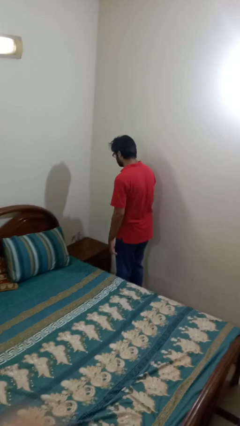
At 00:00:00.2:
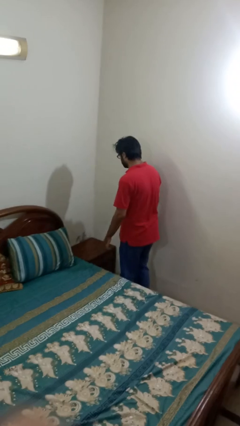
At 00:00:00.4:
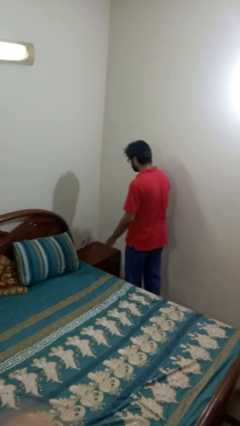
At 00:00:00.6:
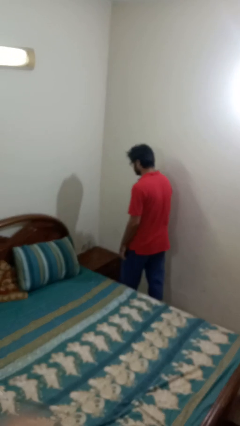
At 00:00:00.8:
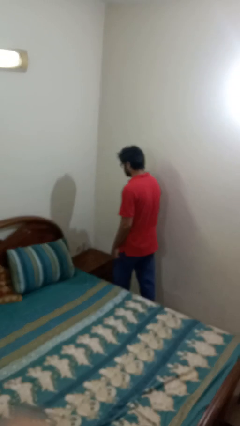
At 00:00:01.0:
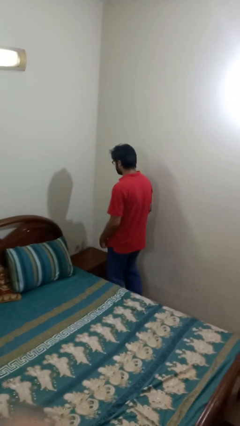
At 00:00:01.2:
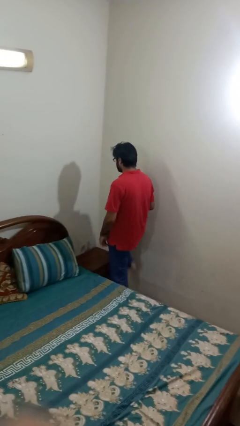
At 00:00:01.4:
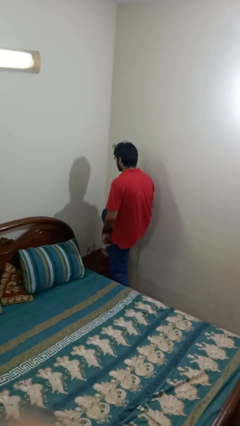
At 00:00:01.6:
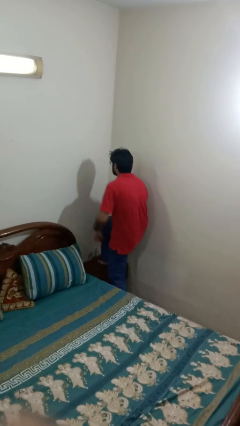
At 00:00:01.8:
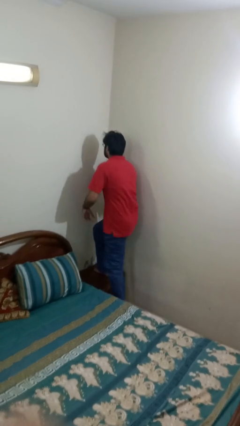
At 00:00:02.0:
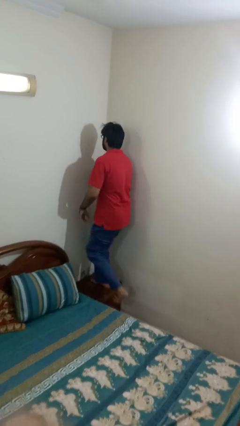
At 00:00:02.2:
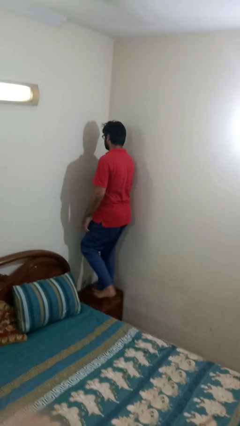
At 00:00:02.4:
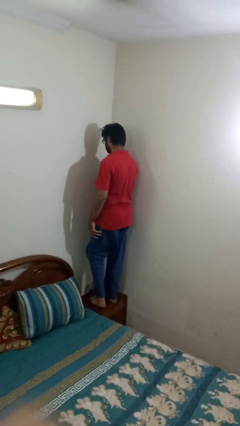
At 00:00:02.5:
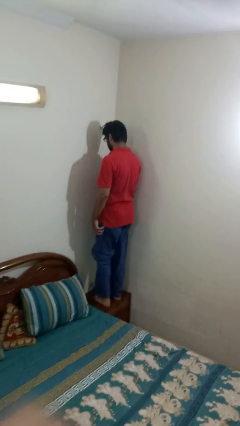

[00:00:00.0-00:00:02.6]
person climbs on table

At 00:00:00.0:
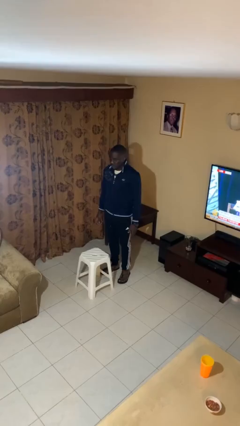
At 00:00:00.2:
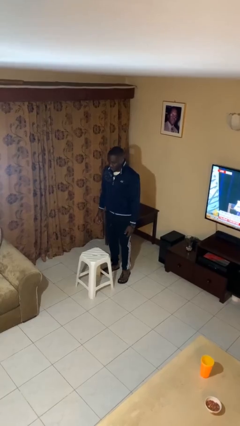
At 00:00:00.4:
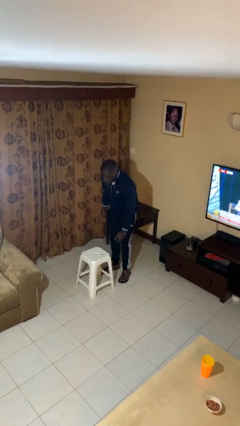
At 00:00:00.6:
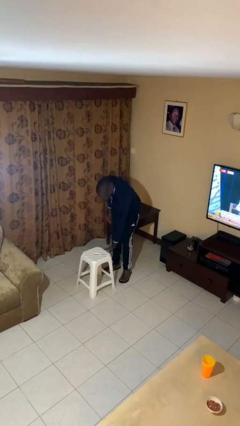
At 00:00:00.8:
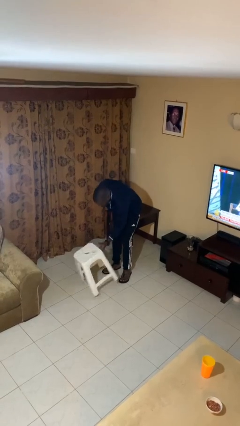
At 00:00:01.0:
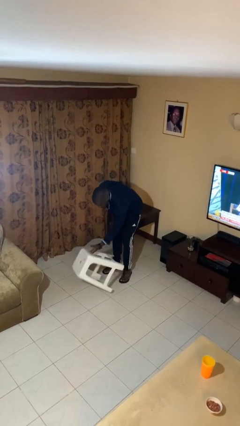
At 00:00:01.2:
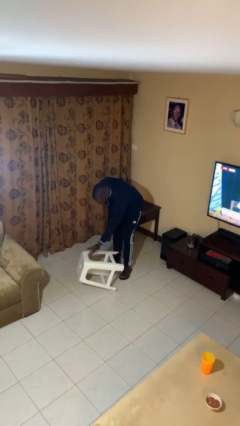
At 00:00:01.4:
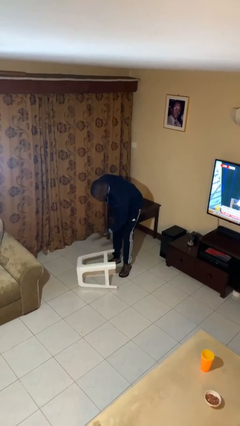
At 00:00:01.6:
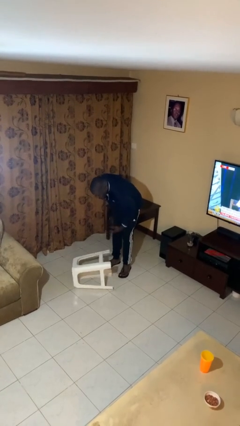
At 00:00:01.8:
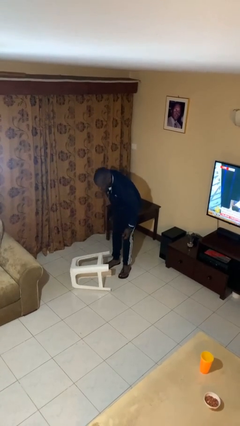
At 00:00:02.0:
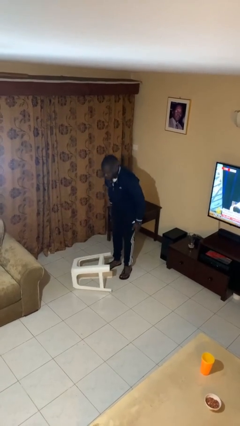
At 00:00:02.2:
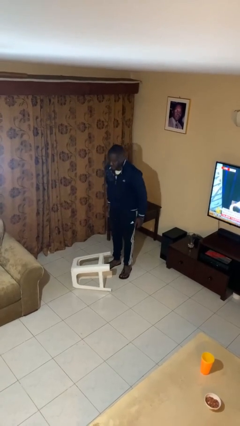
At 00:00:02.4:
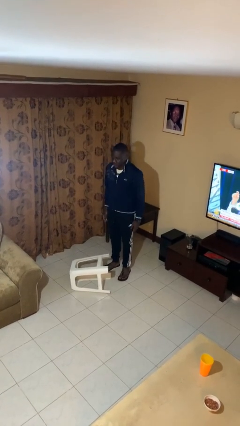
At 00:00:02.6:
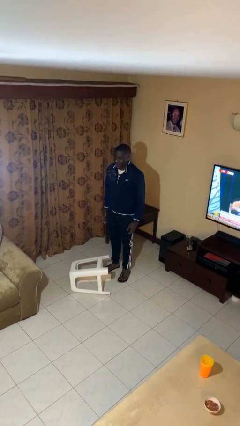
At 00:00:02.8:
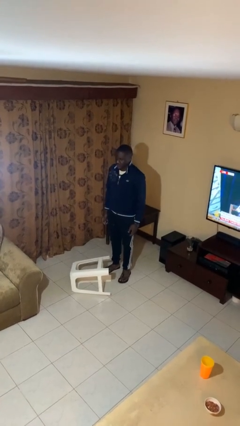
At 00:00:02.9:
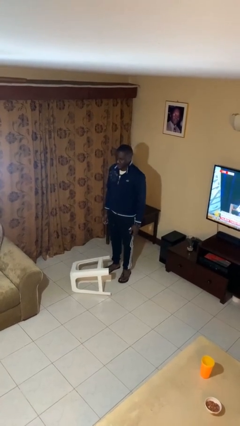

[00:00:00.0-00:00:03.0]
person knocks over furniture

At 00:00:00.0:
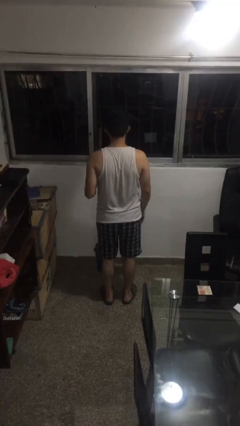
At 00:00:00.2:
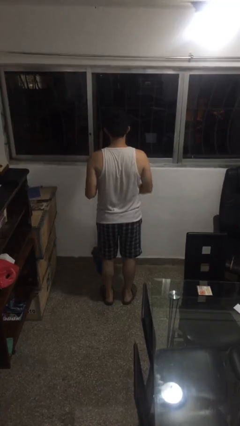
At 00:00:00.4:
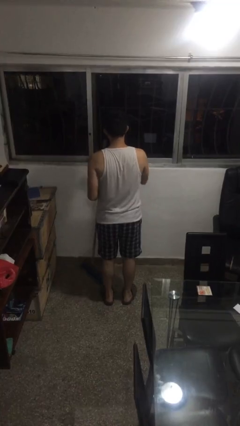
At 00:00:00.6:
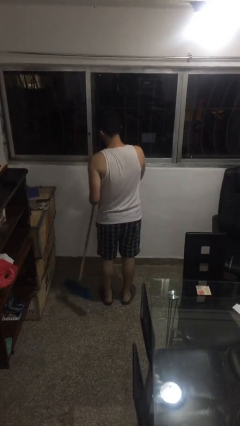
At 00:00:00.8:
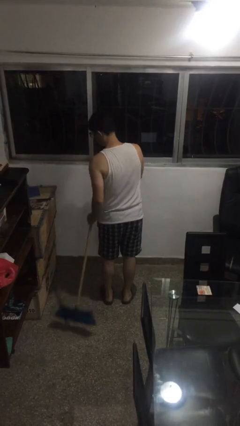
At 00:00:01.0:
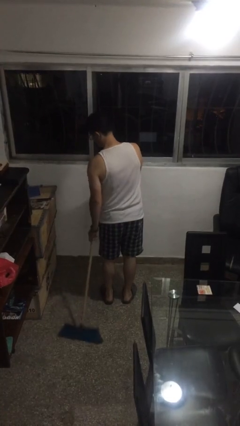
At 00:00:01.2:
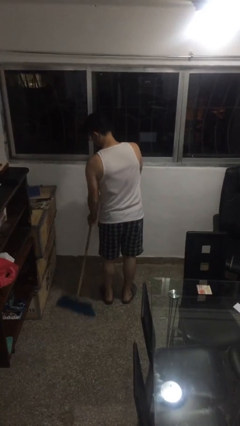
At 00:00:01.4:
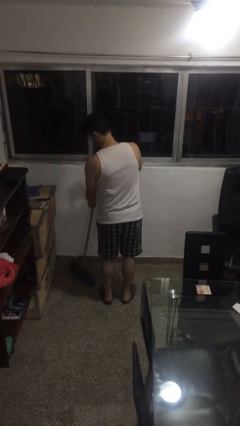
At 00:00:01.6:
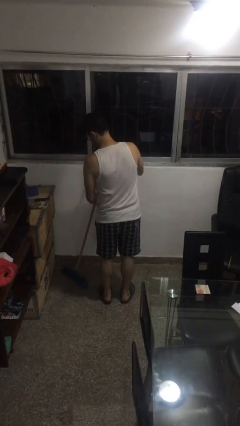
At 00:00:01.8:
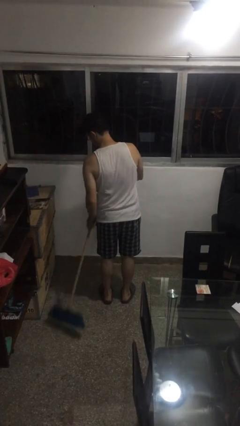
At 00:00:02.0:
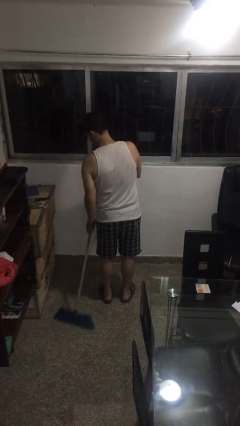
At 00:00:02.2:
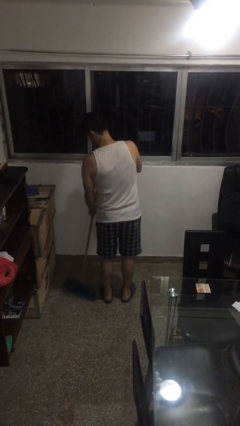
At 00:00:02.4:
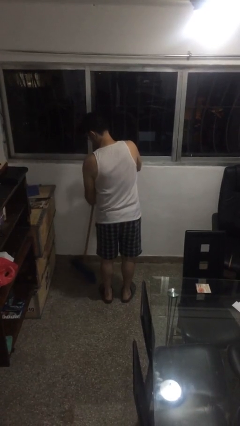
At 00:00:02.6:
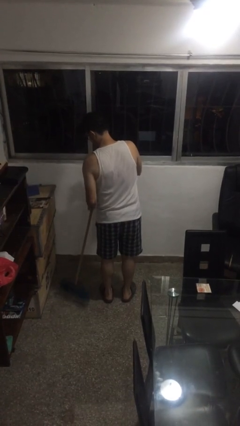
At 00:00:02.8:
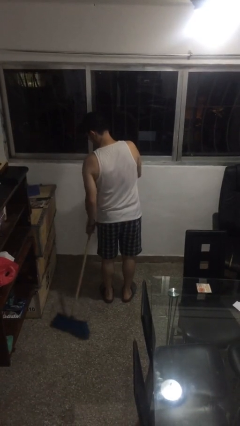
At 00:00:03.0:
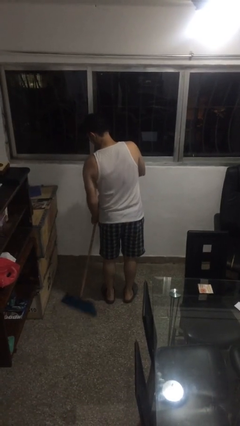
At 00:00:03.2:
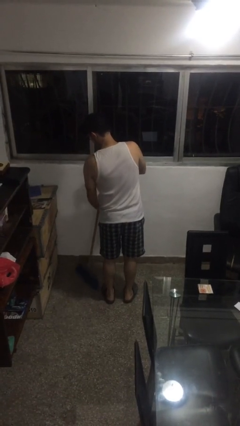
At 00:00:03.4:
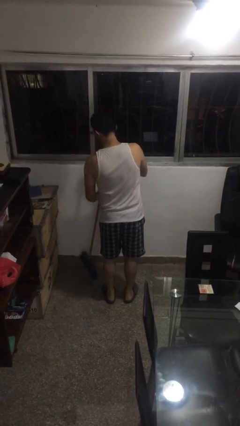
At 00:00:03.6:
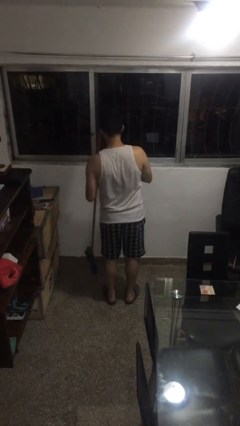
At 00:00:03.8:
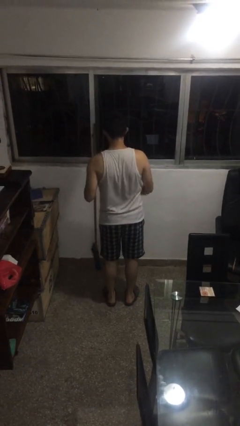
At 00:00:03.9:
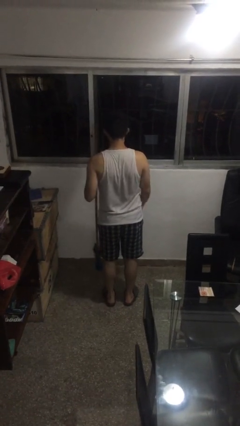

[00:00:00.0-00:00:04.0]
person sweeps floor

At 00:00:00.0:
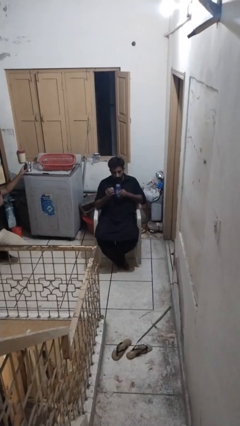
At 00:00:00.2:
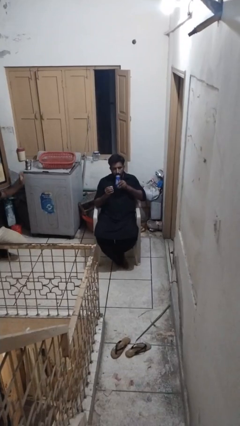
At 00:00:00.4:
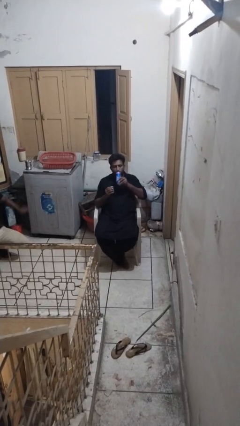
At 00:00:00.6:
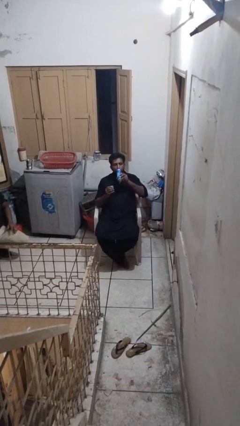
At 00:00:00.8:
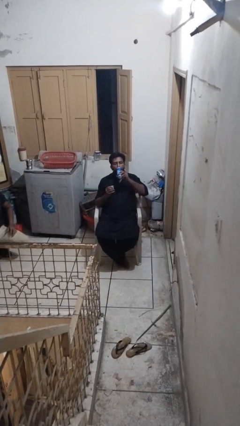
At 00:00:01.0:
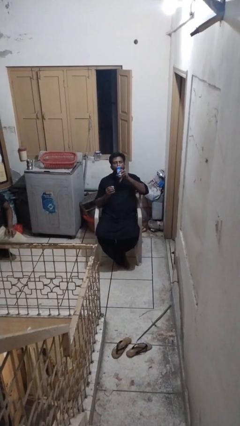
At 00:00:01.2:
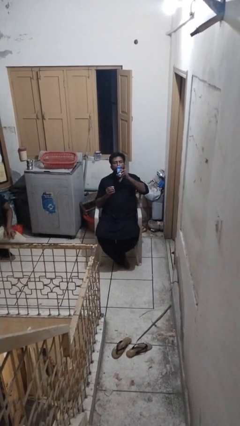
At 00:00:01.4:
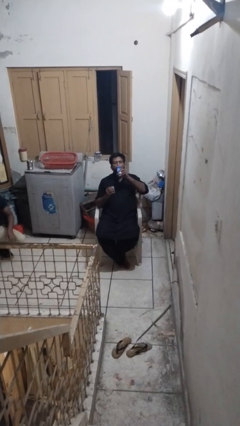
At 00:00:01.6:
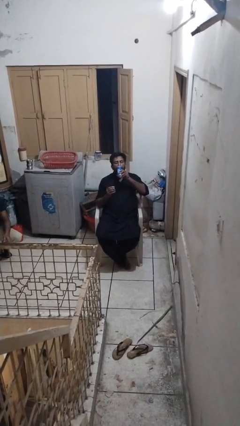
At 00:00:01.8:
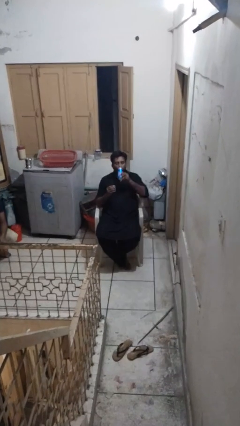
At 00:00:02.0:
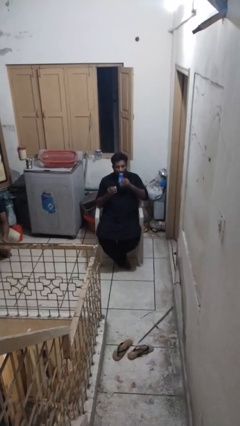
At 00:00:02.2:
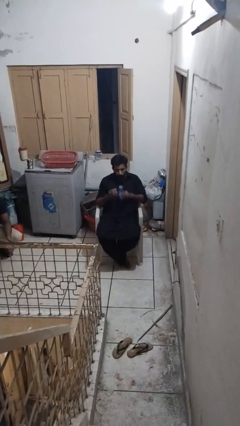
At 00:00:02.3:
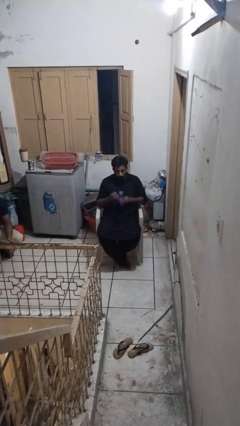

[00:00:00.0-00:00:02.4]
person drinks from beverage can

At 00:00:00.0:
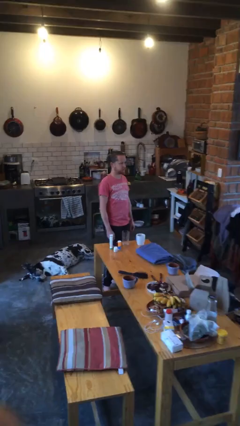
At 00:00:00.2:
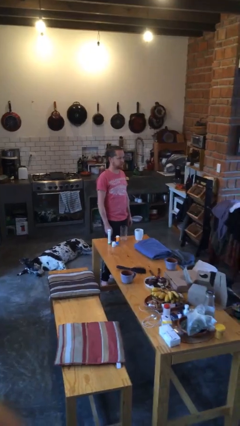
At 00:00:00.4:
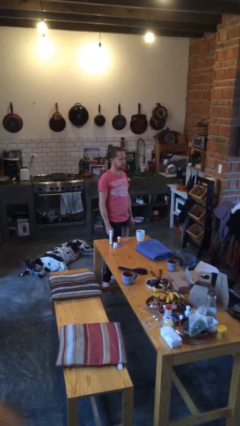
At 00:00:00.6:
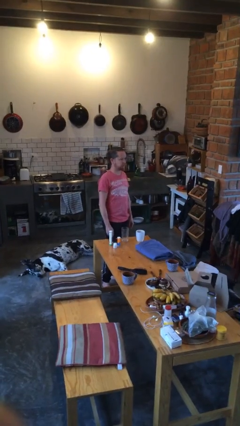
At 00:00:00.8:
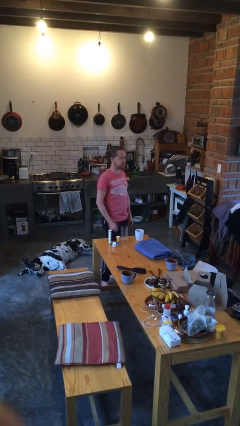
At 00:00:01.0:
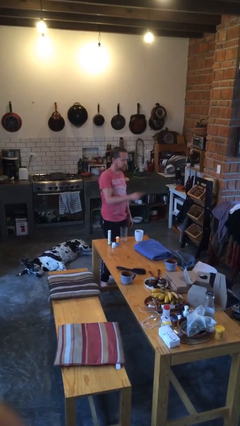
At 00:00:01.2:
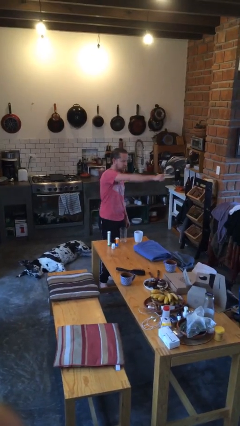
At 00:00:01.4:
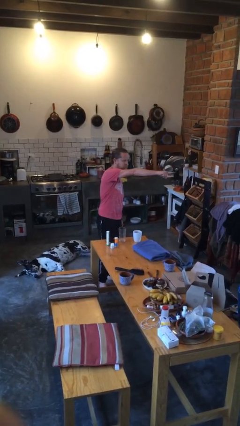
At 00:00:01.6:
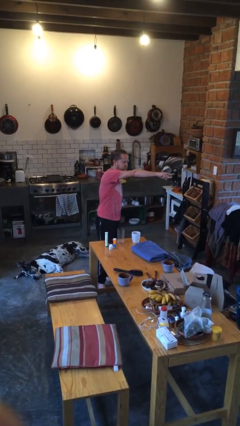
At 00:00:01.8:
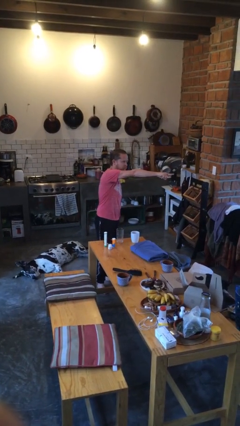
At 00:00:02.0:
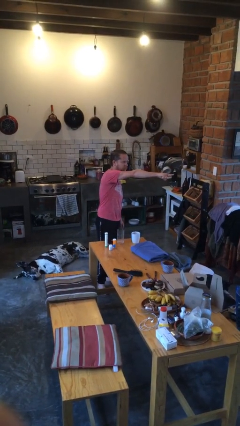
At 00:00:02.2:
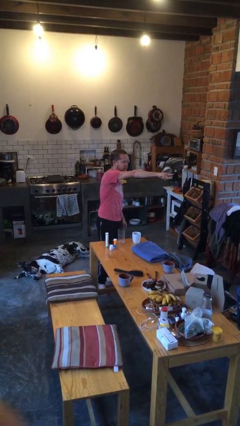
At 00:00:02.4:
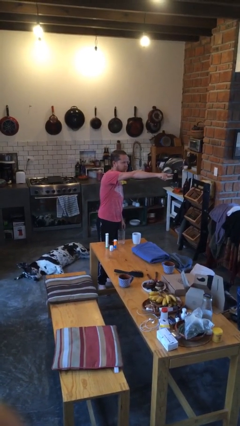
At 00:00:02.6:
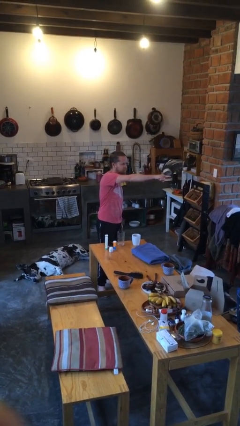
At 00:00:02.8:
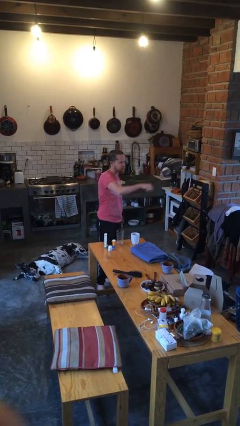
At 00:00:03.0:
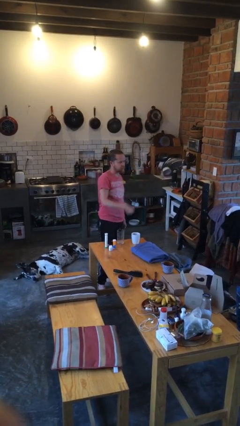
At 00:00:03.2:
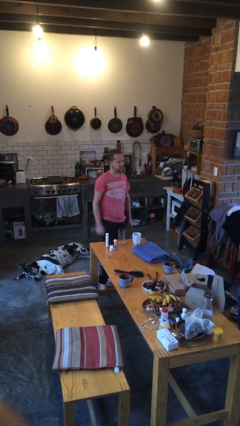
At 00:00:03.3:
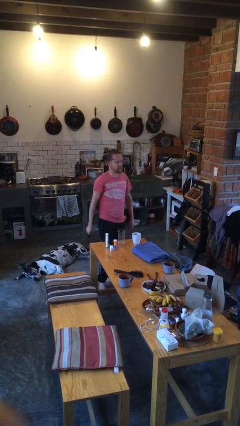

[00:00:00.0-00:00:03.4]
person points at person

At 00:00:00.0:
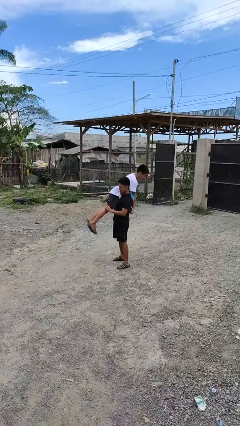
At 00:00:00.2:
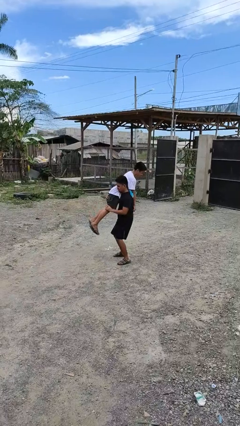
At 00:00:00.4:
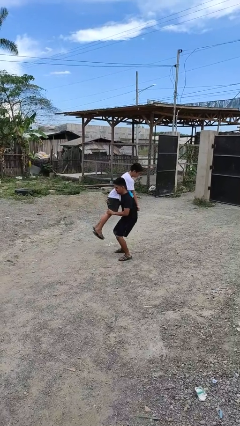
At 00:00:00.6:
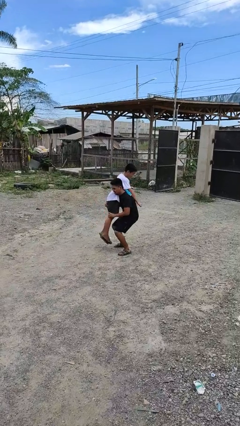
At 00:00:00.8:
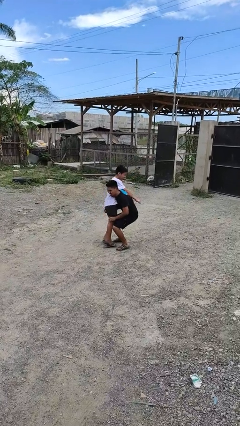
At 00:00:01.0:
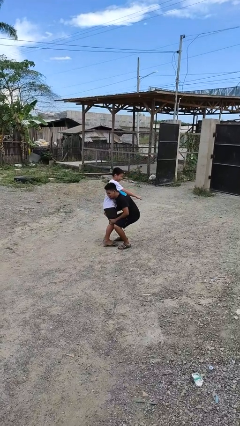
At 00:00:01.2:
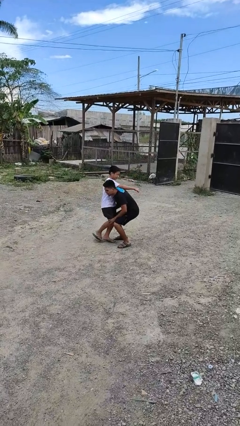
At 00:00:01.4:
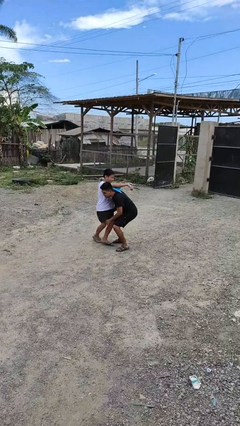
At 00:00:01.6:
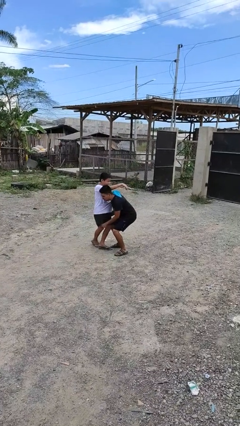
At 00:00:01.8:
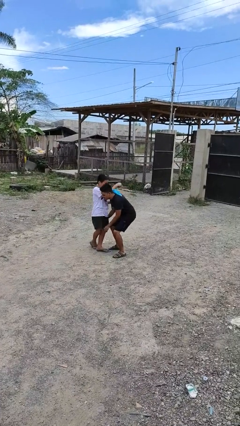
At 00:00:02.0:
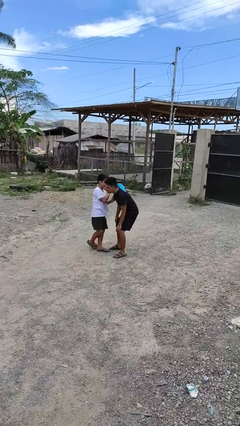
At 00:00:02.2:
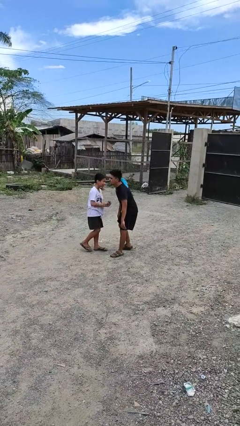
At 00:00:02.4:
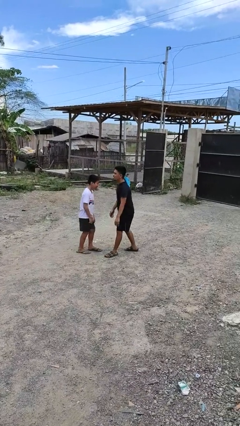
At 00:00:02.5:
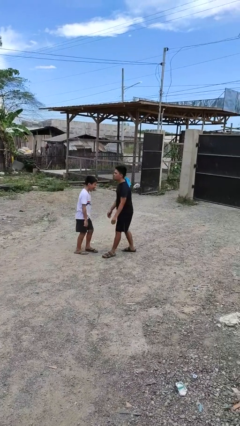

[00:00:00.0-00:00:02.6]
person puts down person
